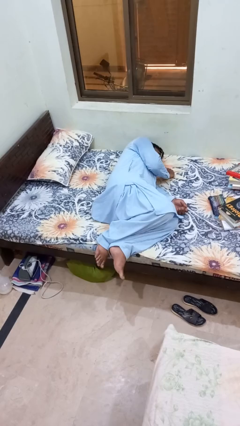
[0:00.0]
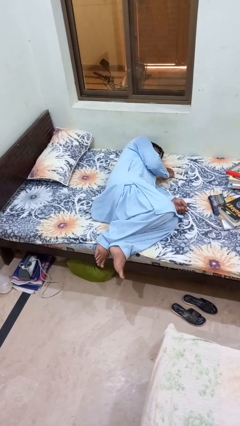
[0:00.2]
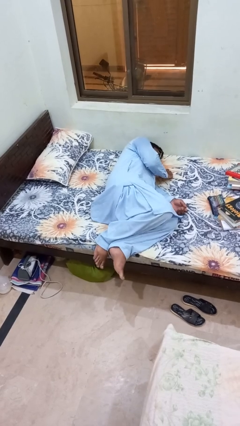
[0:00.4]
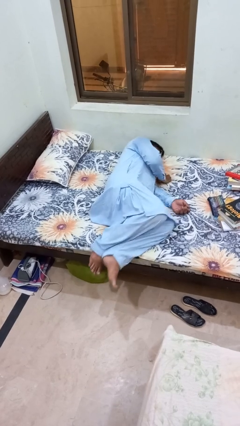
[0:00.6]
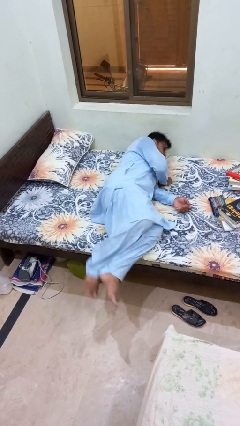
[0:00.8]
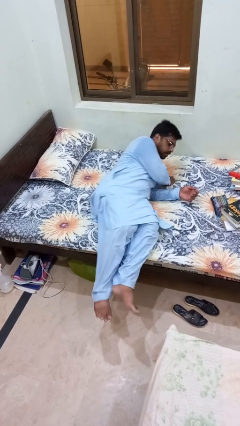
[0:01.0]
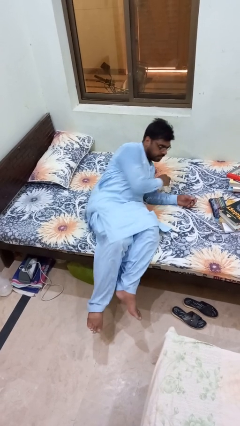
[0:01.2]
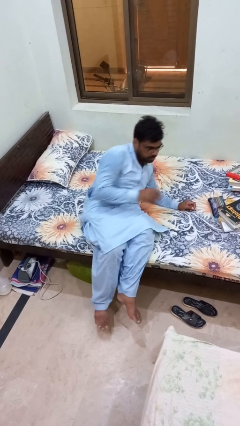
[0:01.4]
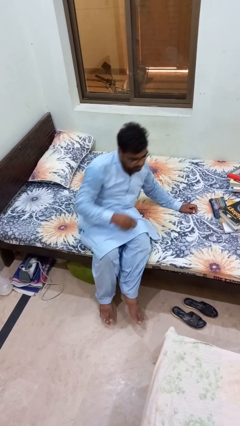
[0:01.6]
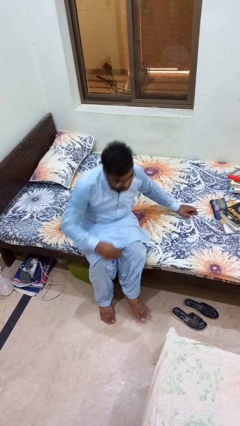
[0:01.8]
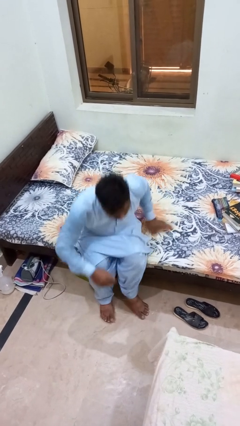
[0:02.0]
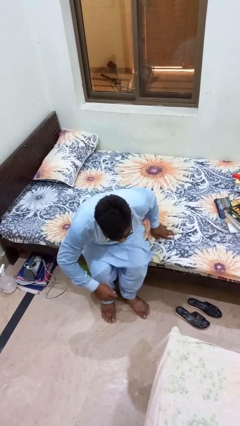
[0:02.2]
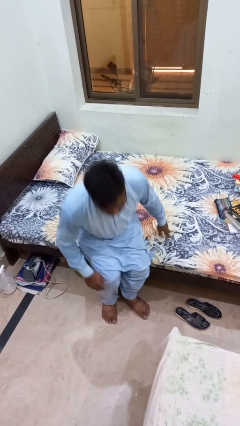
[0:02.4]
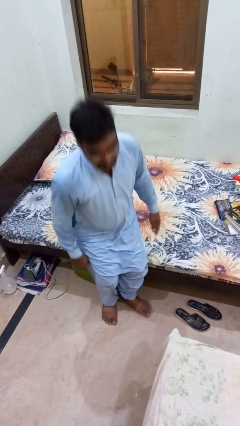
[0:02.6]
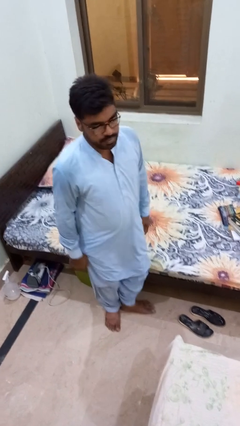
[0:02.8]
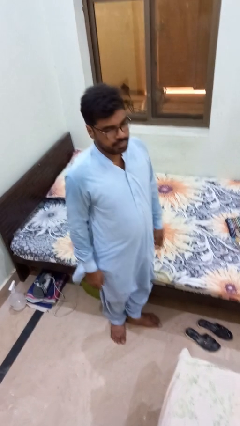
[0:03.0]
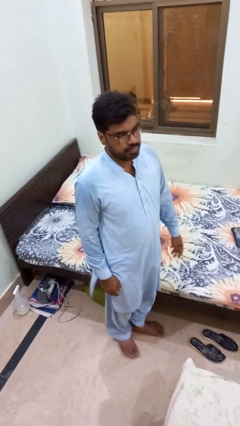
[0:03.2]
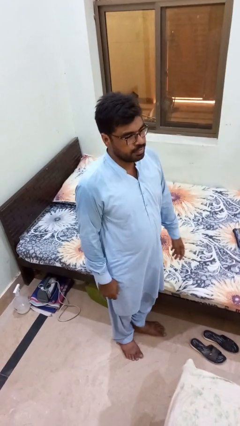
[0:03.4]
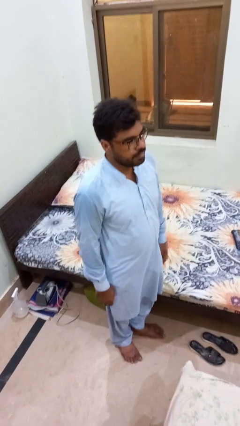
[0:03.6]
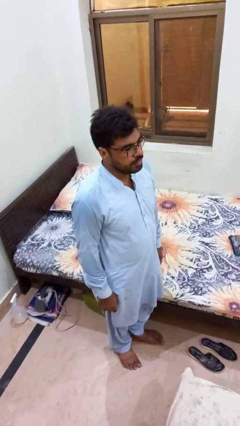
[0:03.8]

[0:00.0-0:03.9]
person stands up

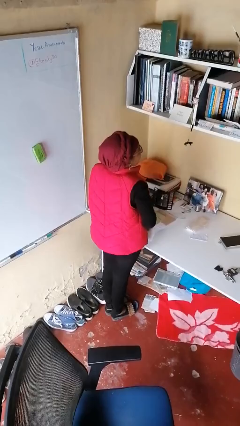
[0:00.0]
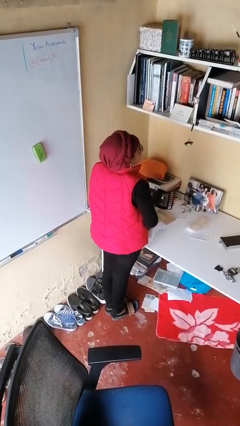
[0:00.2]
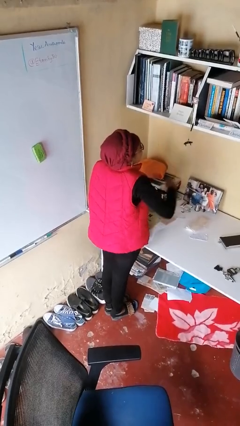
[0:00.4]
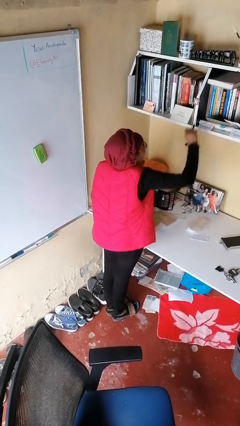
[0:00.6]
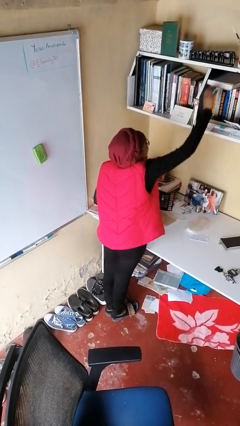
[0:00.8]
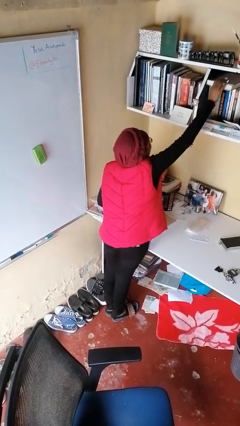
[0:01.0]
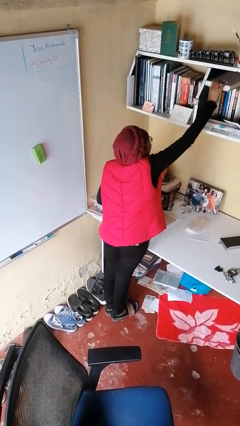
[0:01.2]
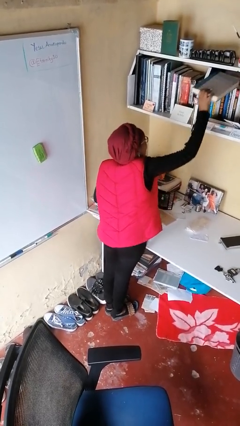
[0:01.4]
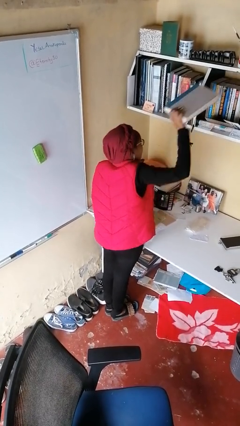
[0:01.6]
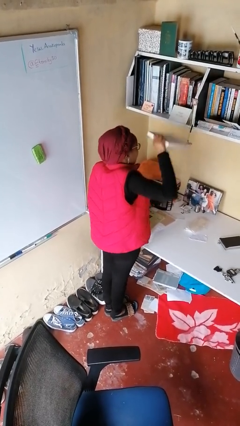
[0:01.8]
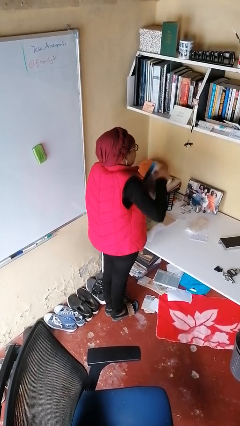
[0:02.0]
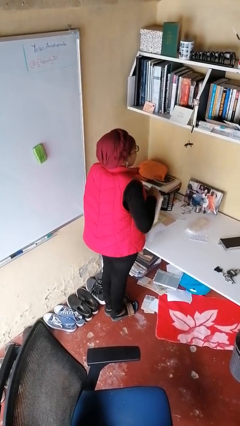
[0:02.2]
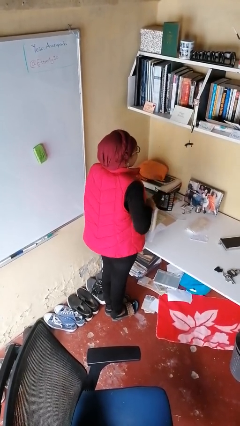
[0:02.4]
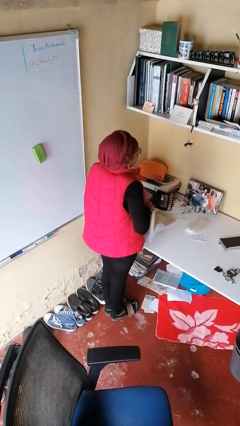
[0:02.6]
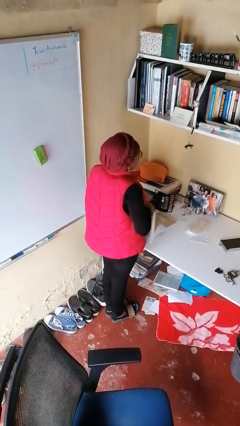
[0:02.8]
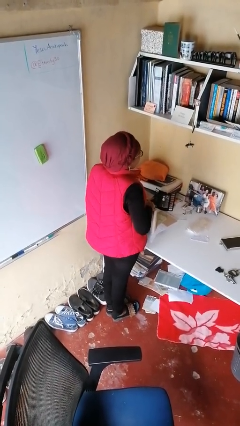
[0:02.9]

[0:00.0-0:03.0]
person picks up object from shelf

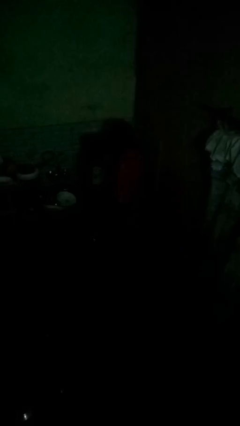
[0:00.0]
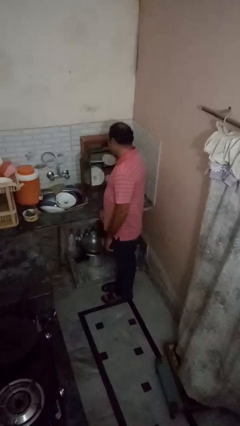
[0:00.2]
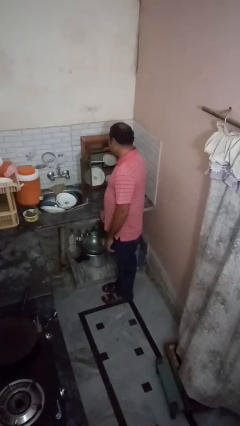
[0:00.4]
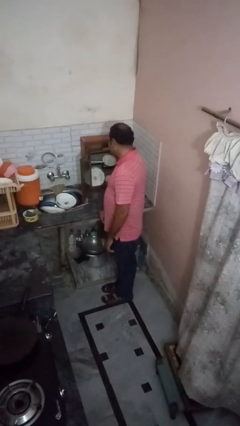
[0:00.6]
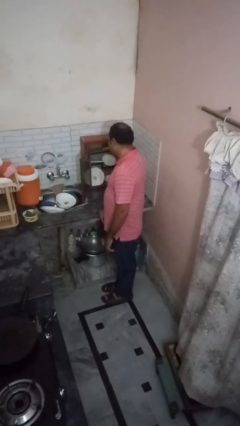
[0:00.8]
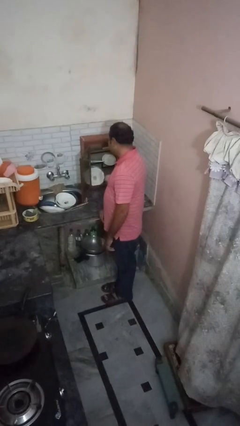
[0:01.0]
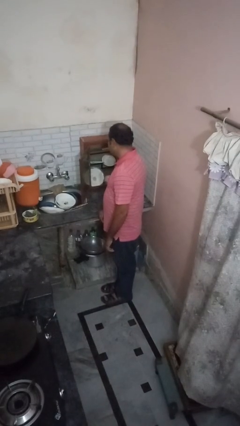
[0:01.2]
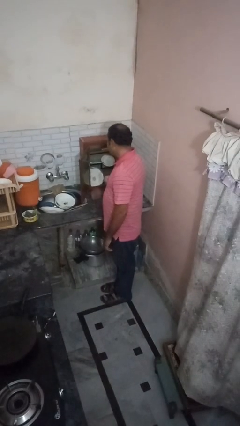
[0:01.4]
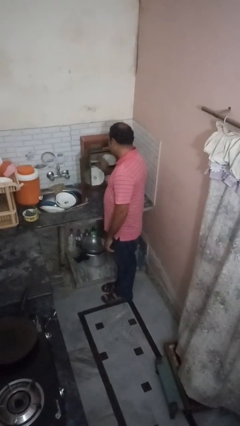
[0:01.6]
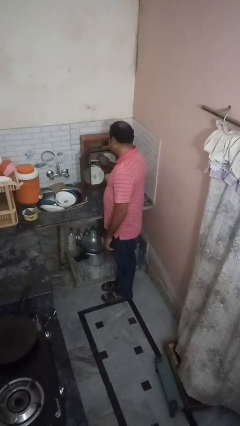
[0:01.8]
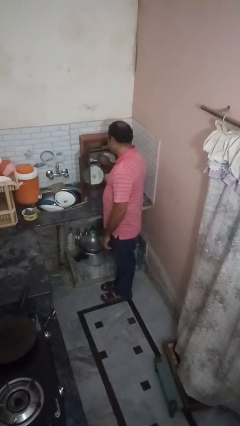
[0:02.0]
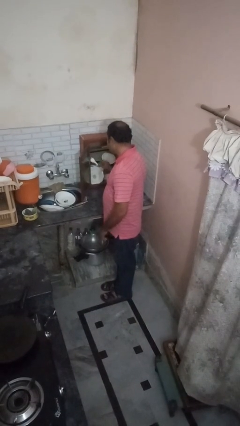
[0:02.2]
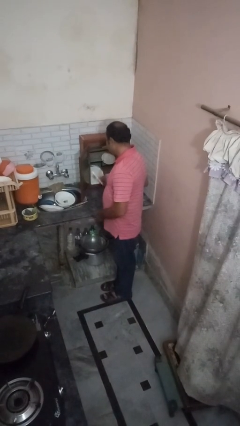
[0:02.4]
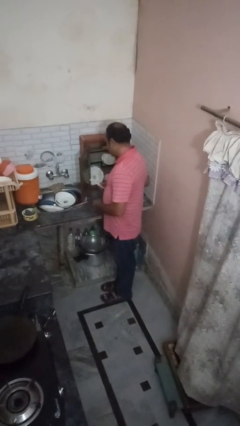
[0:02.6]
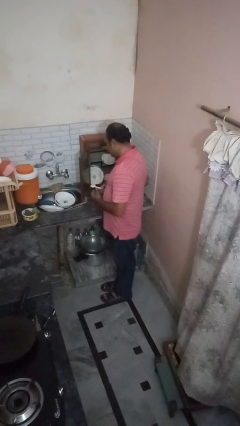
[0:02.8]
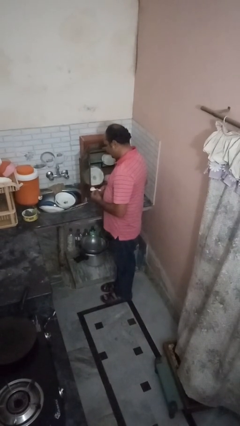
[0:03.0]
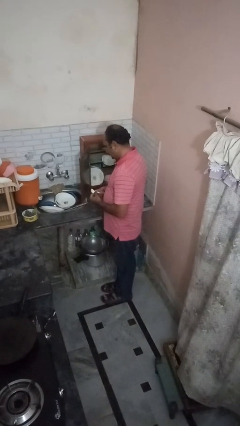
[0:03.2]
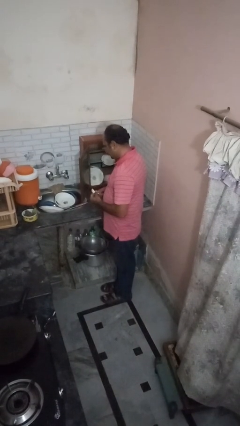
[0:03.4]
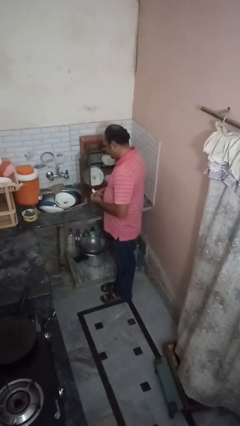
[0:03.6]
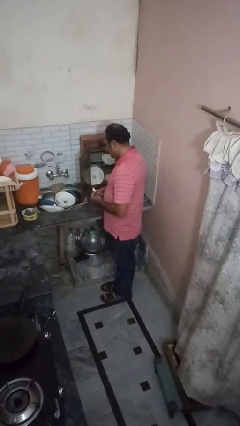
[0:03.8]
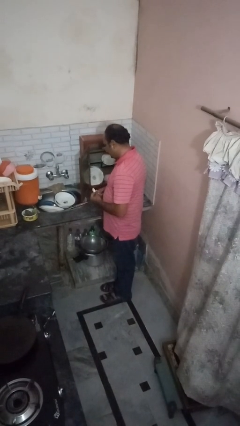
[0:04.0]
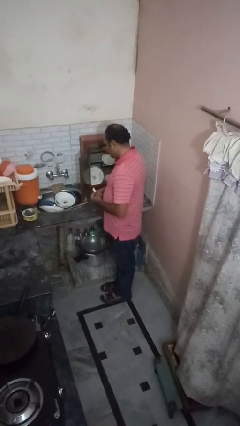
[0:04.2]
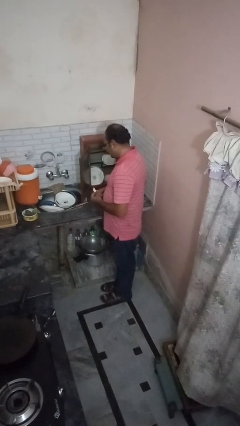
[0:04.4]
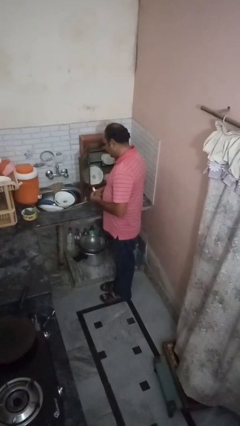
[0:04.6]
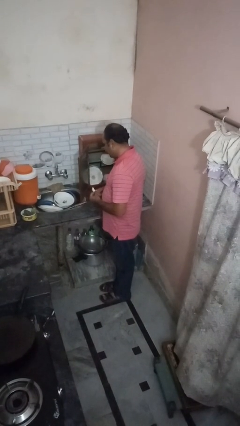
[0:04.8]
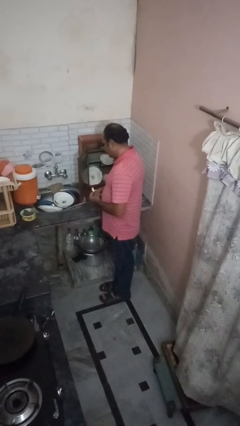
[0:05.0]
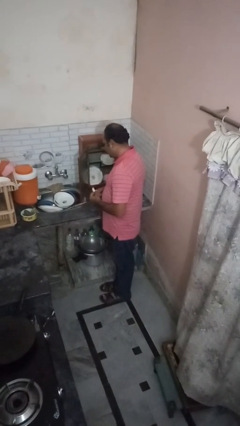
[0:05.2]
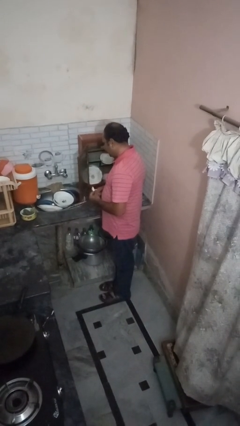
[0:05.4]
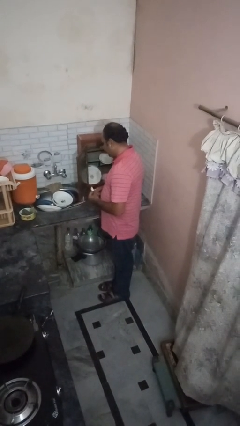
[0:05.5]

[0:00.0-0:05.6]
person puts object in cabinet

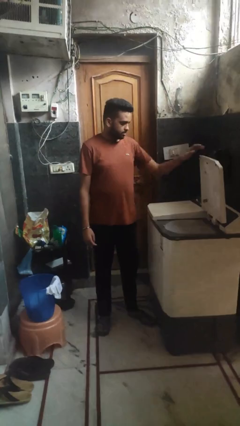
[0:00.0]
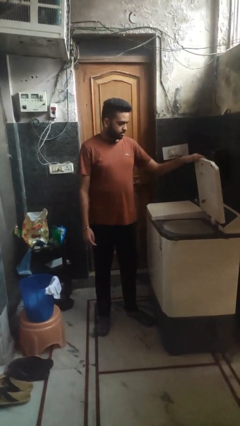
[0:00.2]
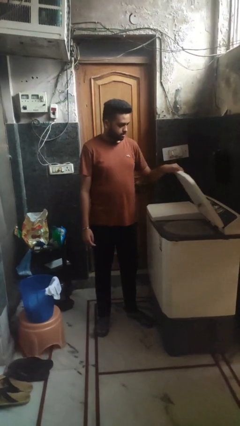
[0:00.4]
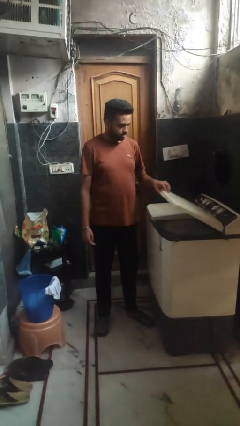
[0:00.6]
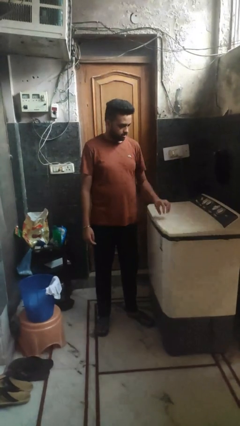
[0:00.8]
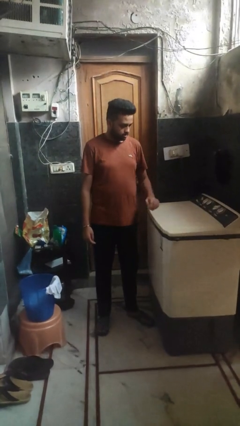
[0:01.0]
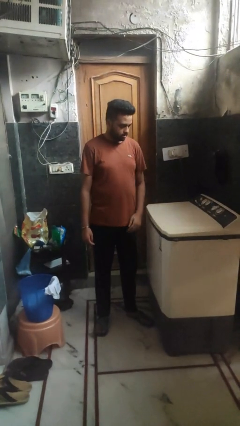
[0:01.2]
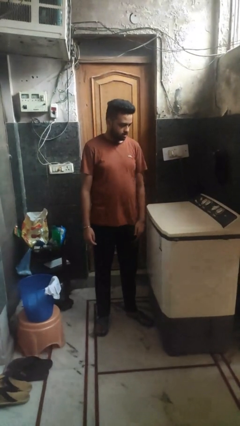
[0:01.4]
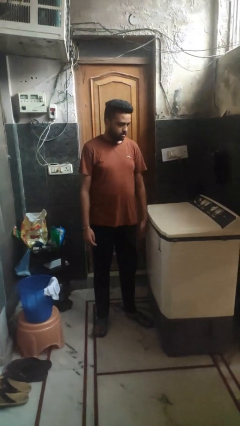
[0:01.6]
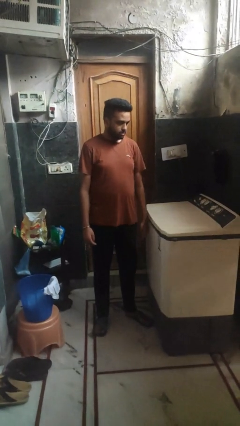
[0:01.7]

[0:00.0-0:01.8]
person closes clothes washer

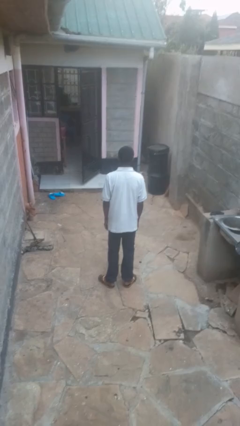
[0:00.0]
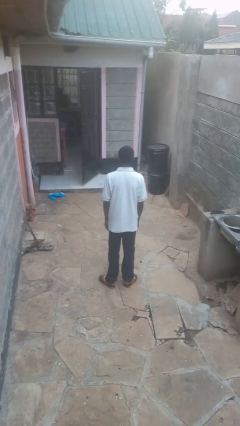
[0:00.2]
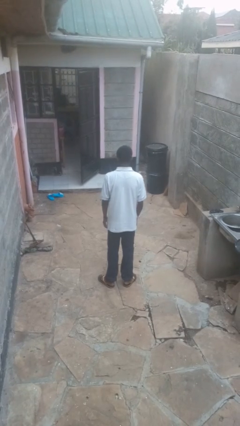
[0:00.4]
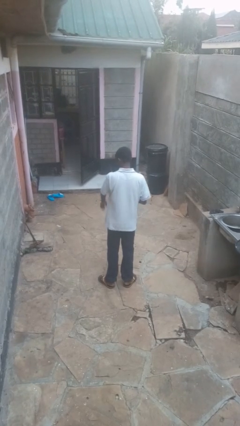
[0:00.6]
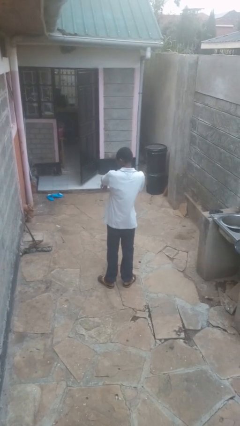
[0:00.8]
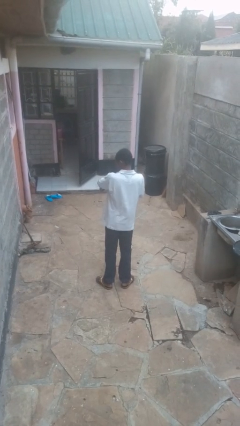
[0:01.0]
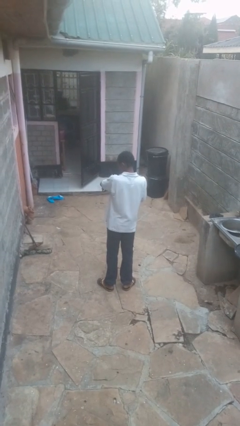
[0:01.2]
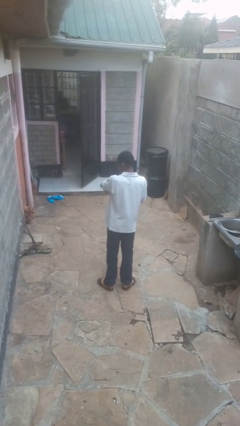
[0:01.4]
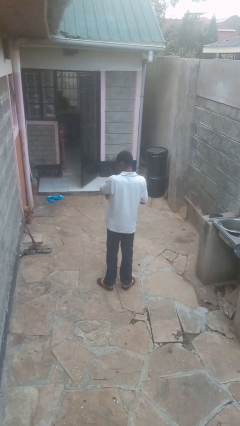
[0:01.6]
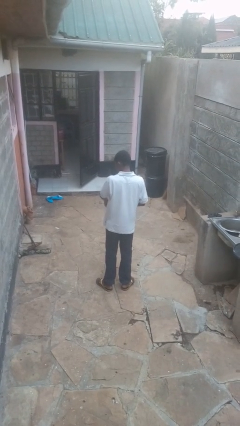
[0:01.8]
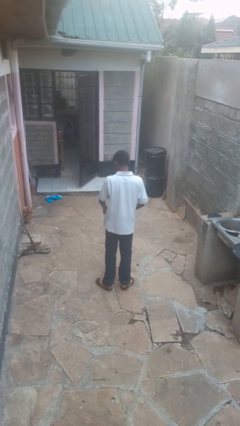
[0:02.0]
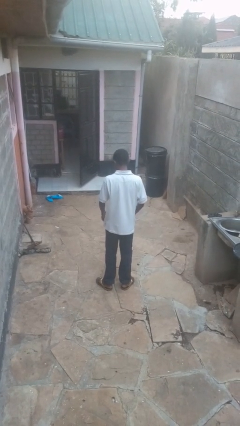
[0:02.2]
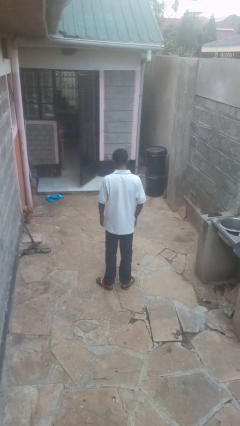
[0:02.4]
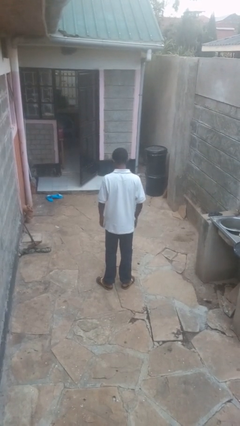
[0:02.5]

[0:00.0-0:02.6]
person swats bug

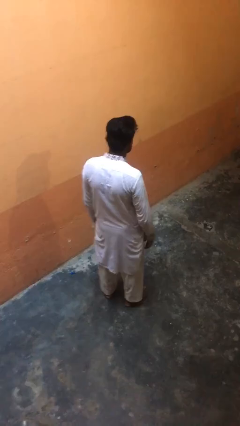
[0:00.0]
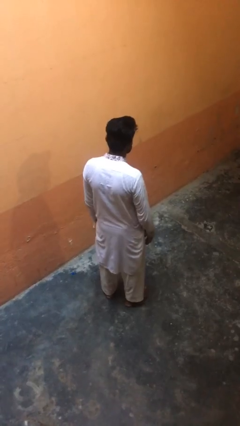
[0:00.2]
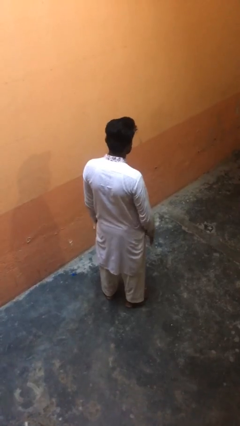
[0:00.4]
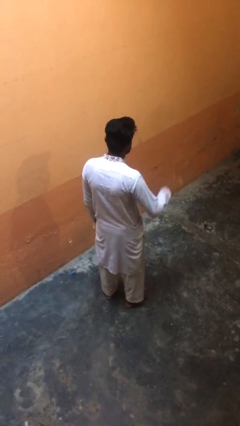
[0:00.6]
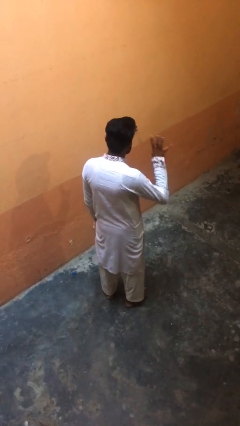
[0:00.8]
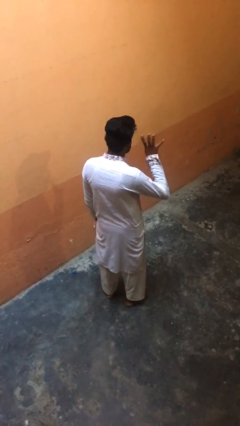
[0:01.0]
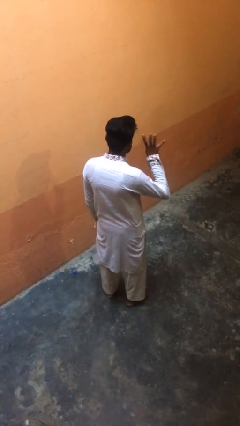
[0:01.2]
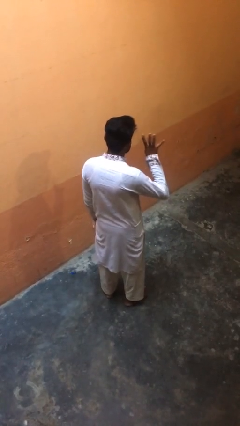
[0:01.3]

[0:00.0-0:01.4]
person gestures number four
